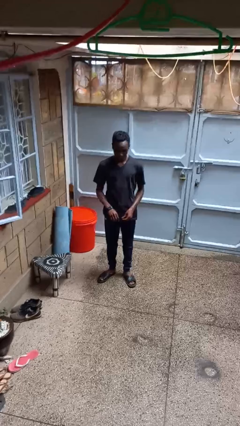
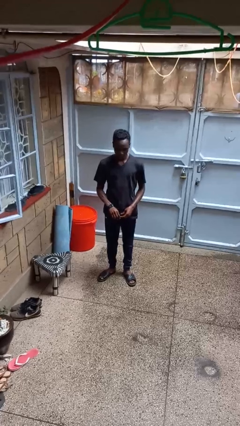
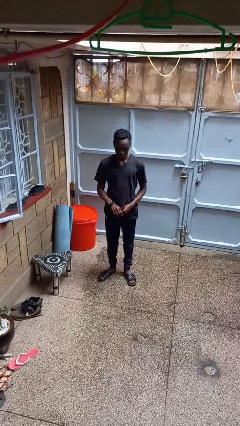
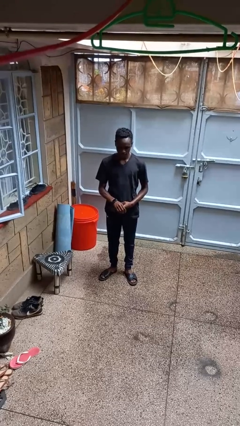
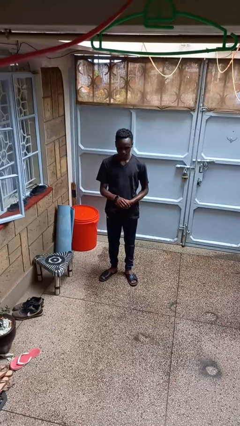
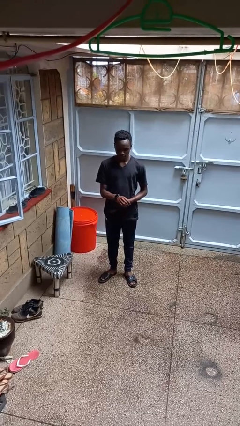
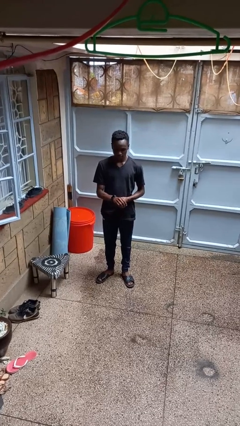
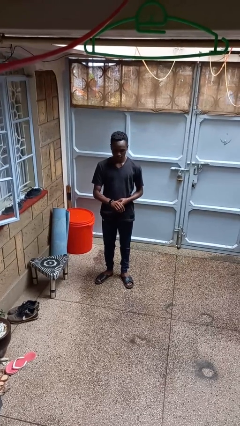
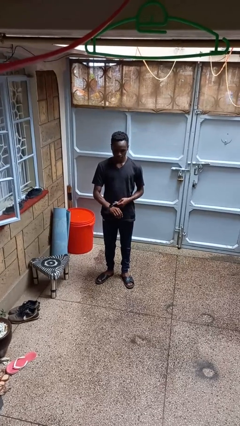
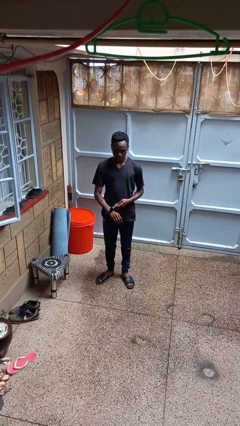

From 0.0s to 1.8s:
person takes off wristwatch

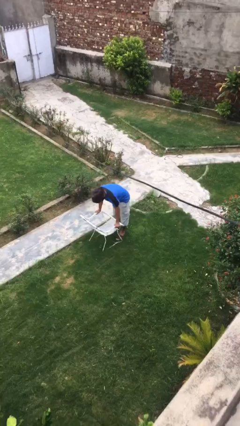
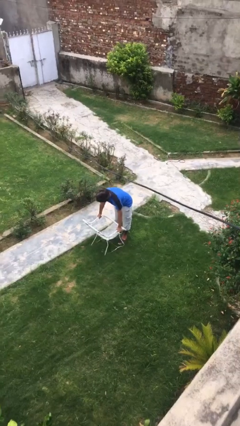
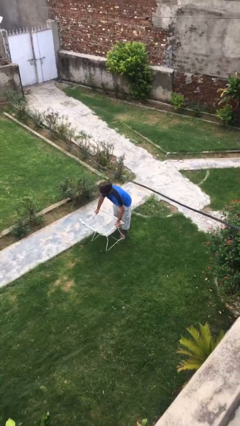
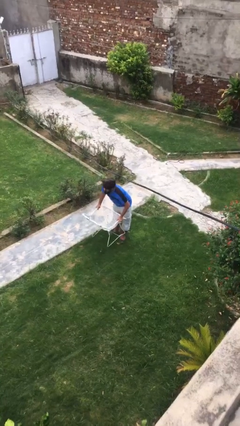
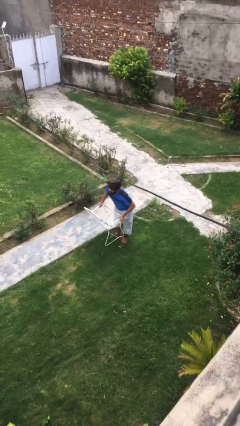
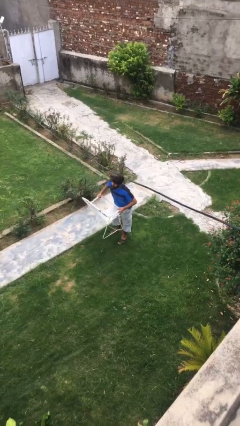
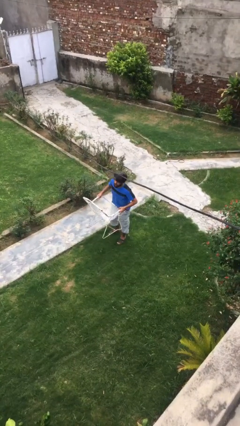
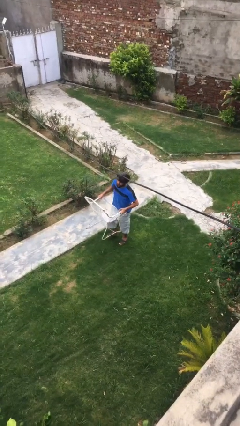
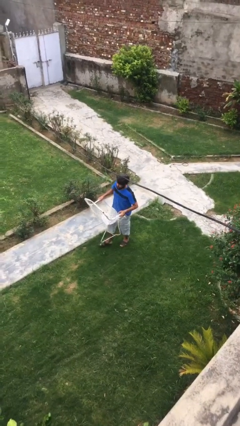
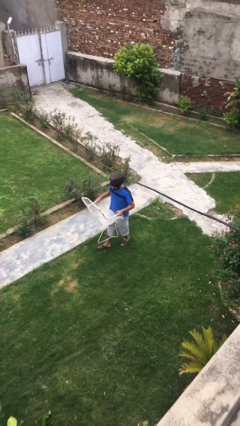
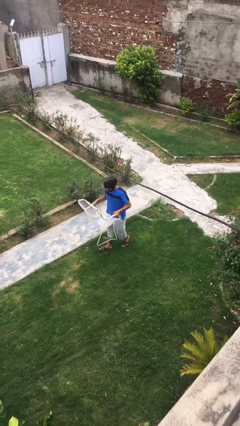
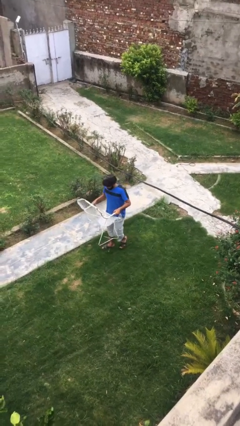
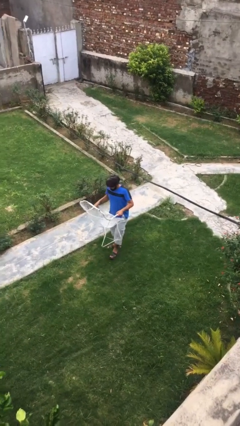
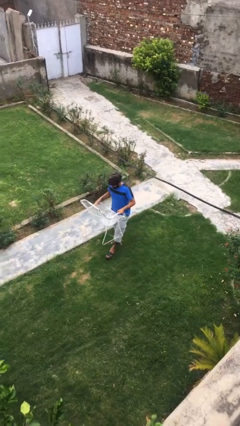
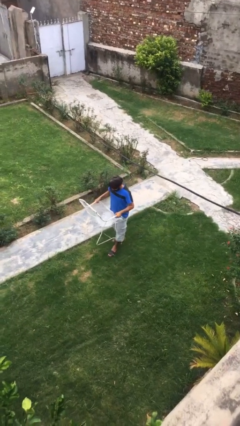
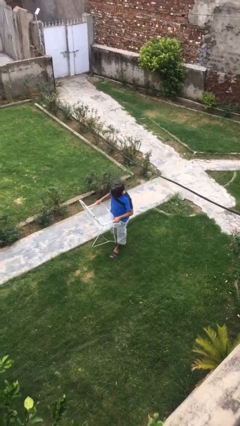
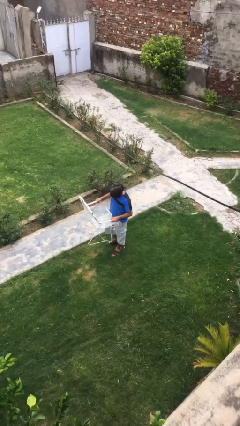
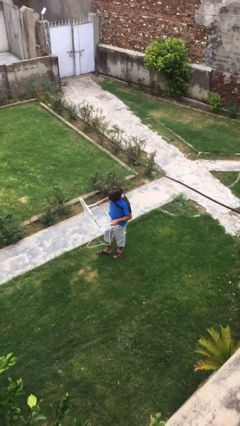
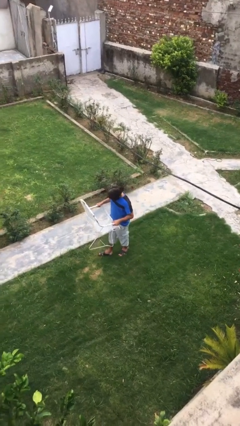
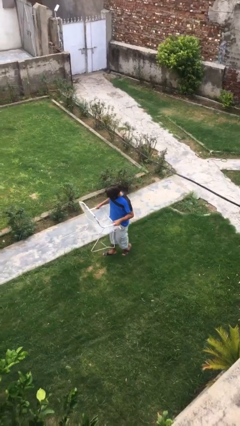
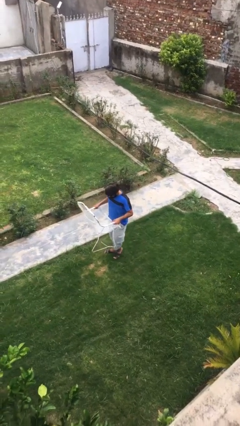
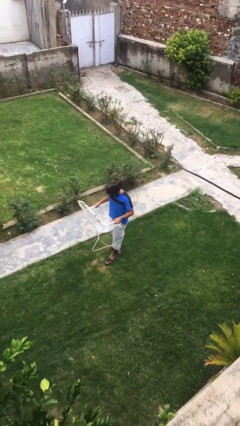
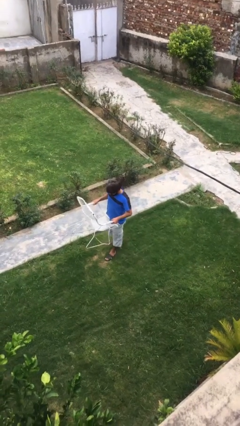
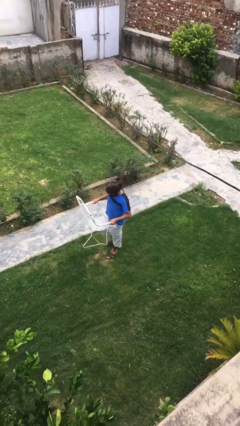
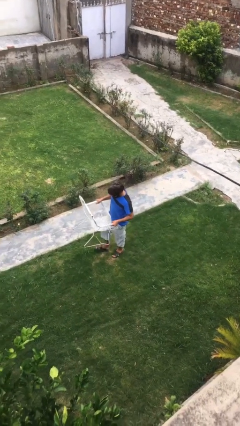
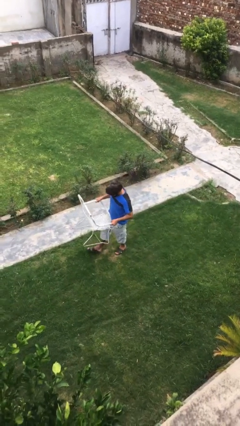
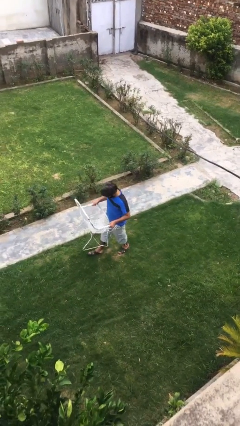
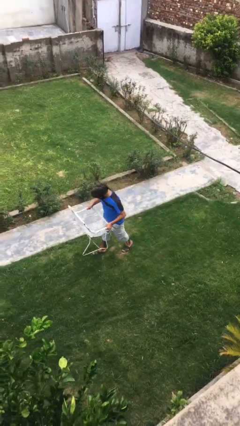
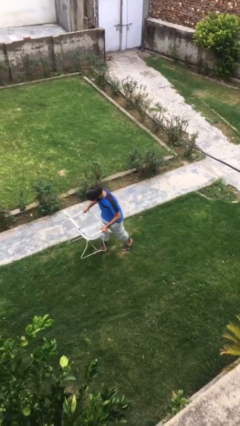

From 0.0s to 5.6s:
person carries heavy object

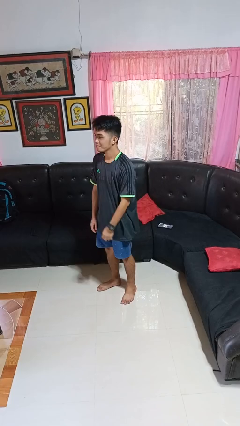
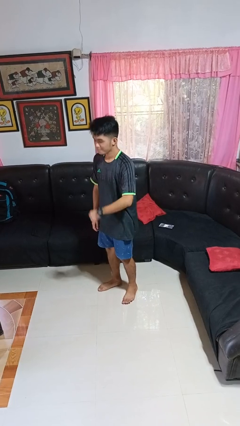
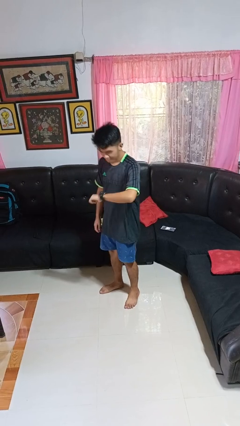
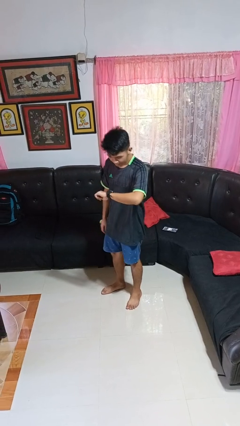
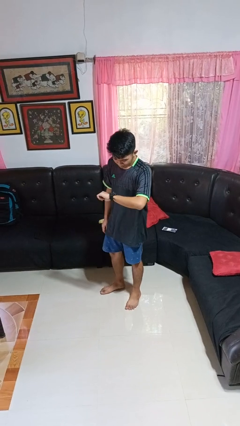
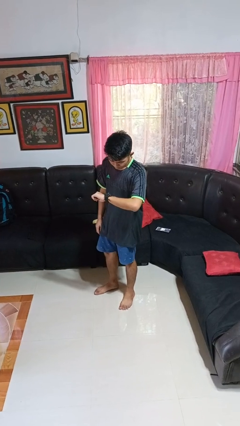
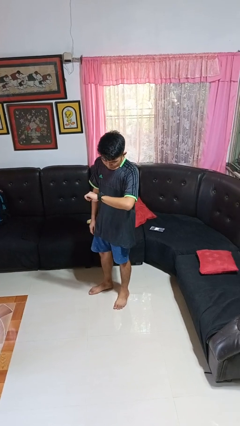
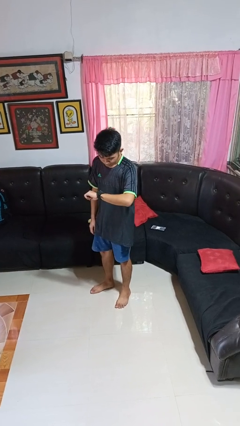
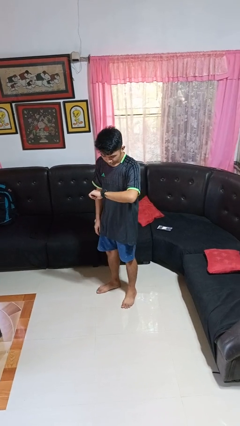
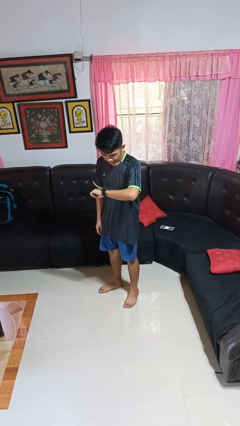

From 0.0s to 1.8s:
person looks at wristwatch

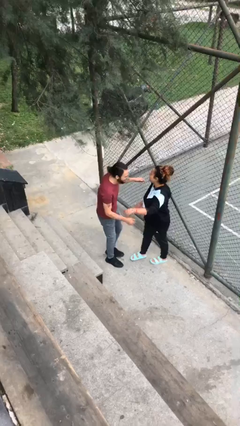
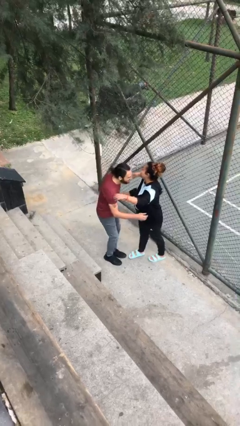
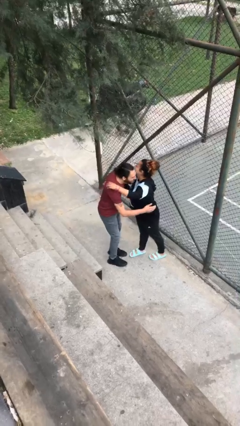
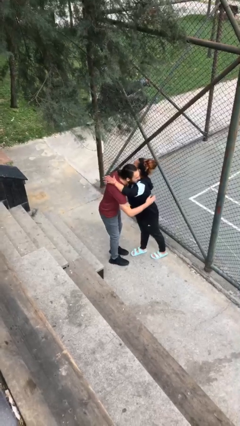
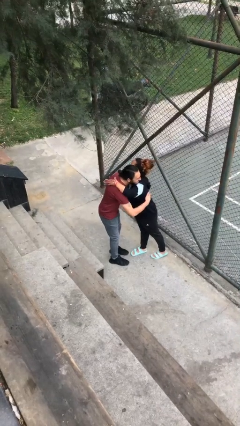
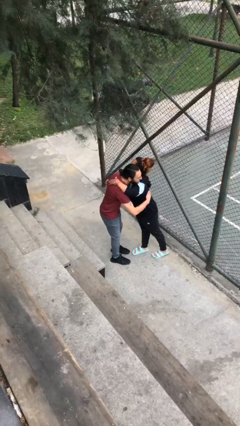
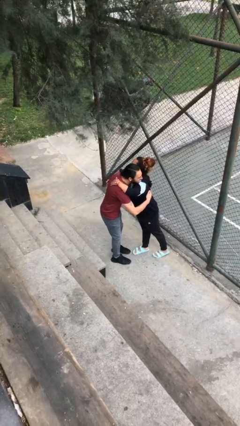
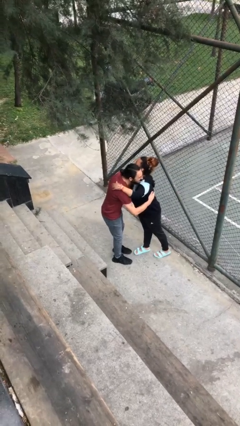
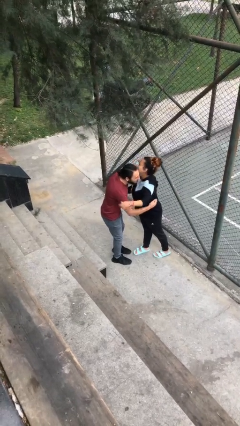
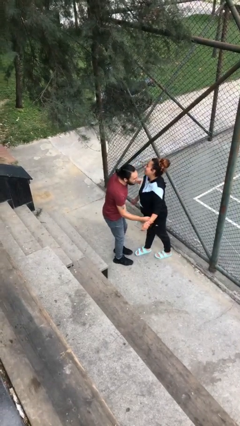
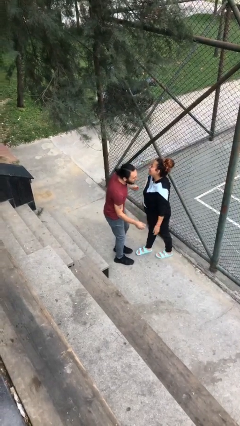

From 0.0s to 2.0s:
person embraces person

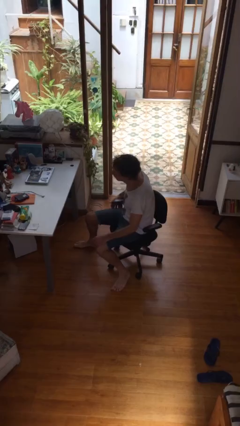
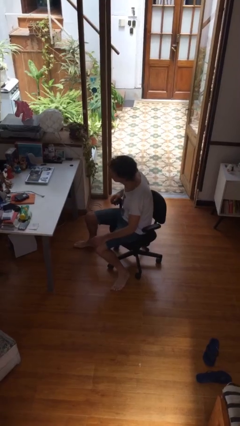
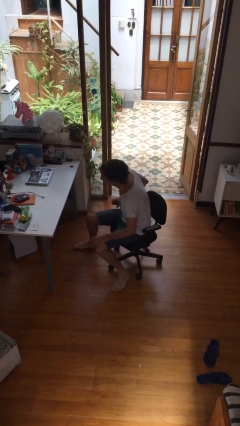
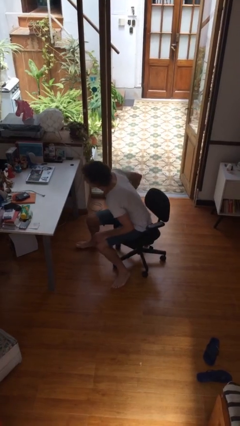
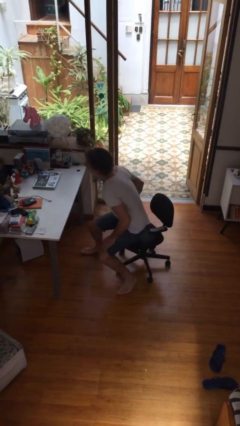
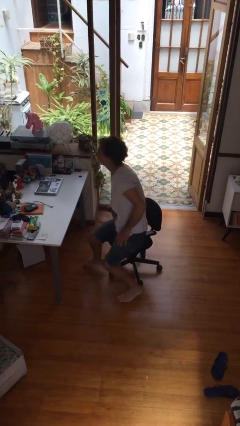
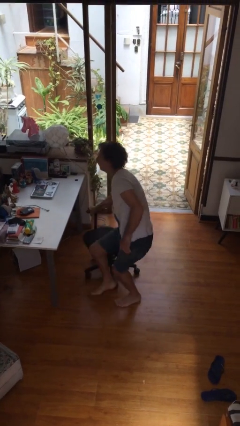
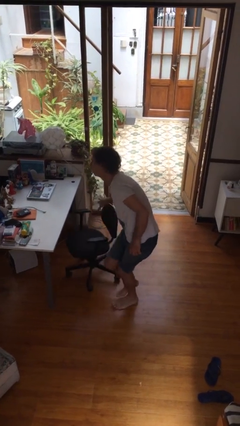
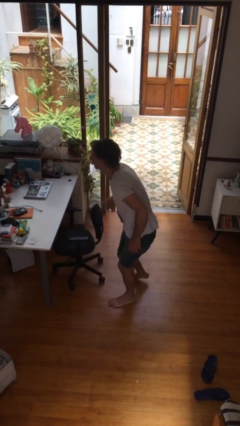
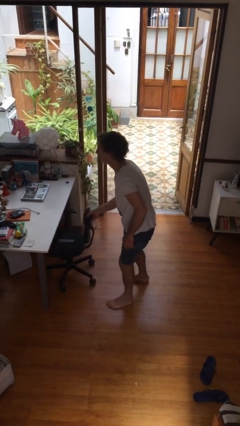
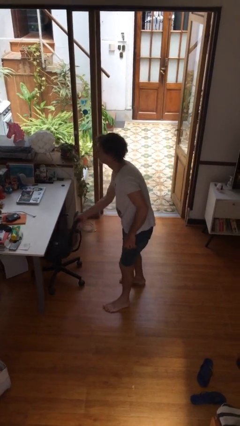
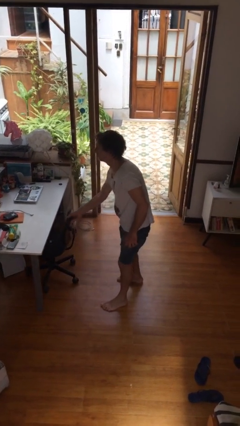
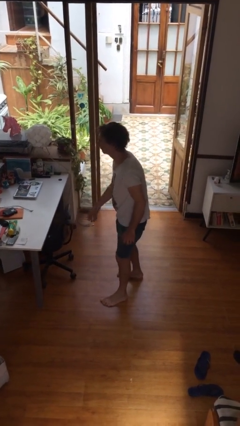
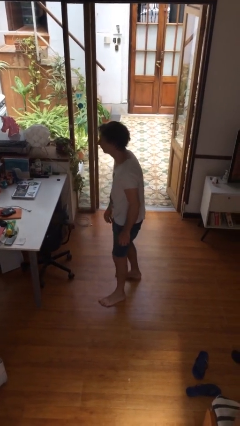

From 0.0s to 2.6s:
person stands up

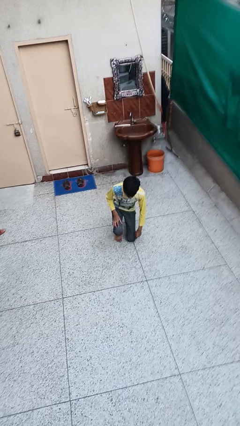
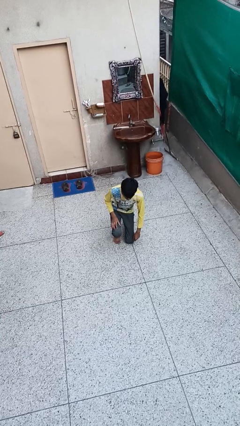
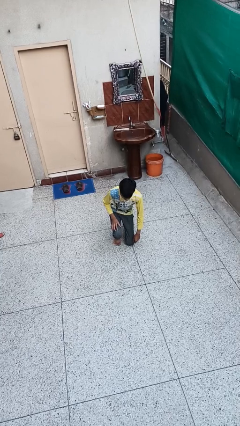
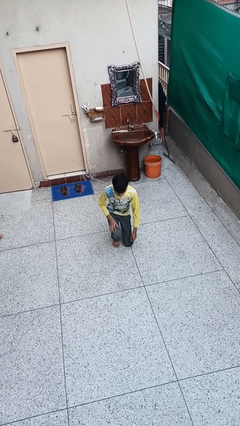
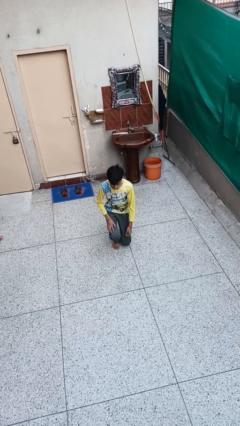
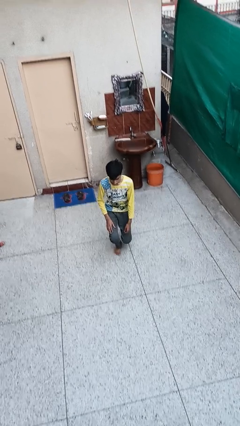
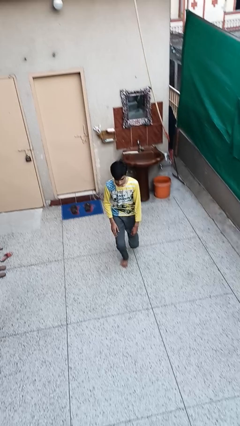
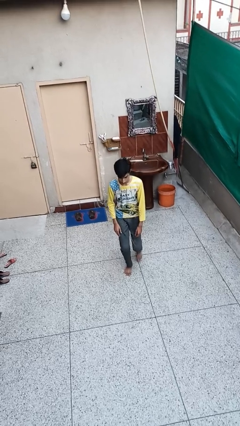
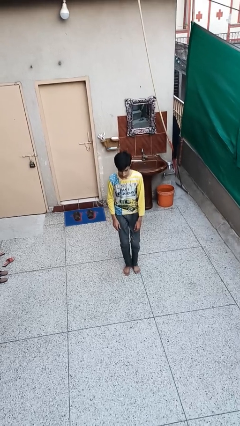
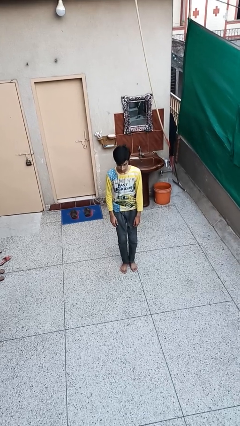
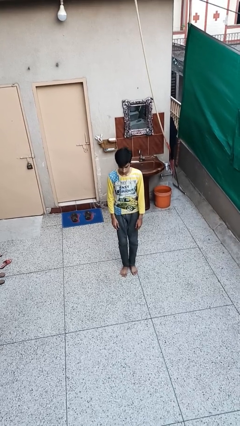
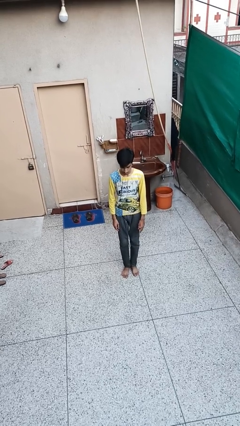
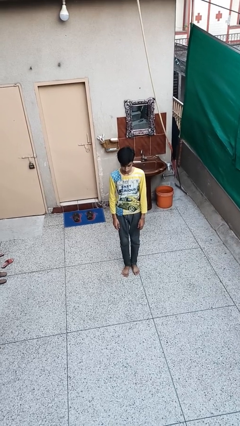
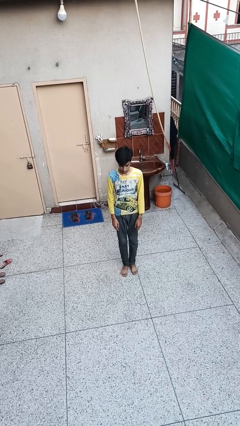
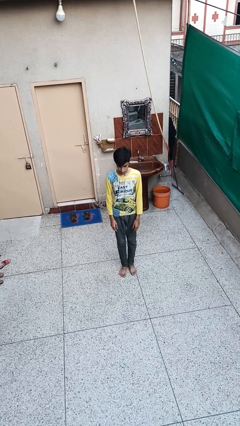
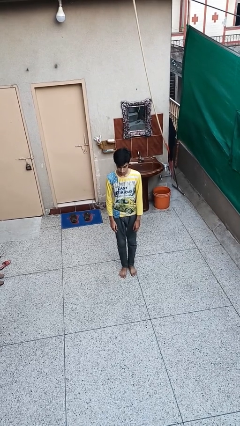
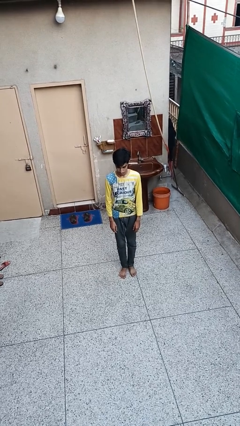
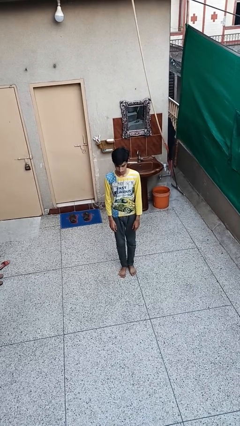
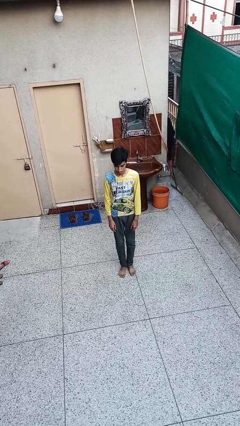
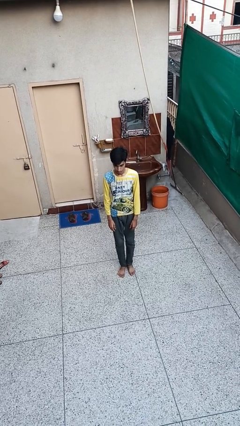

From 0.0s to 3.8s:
person stands up from floor
